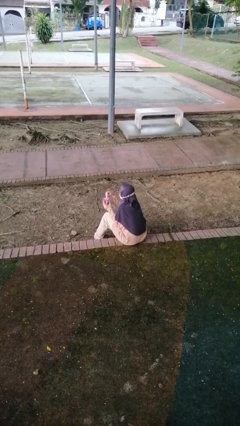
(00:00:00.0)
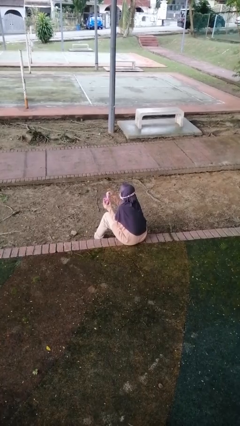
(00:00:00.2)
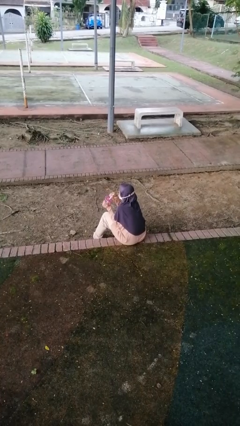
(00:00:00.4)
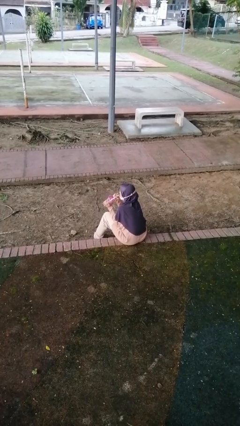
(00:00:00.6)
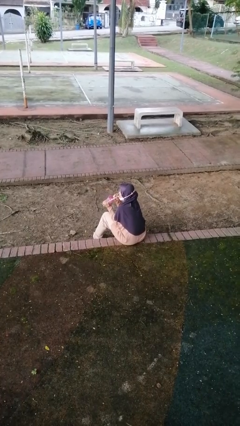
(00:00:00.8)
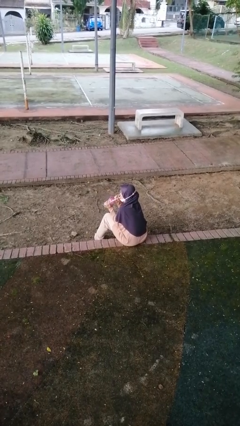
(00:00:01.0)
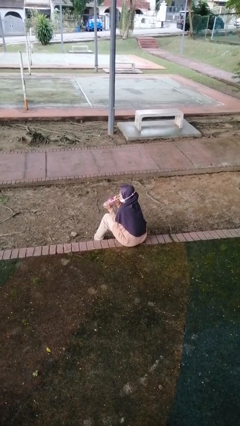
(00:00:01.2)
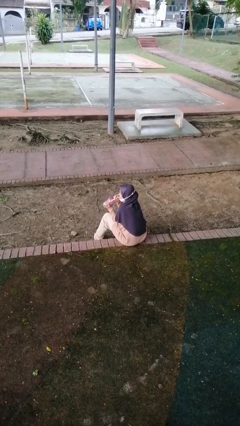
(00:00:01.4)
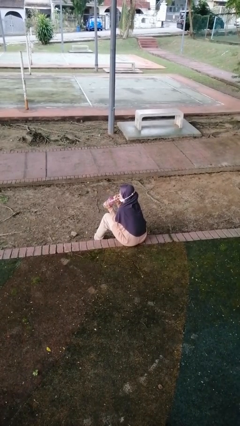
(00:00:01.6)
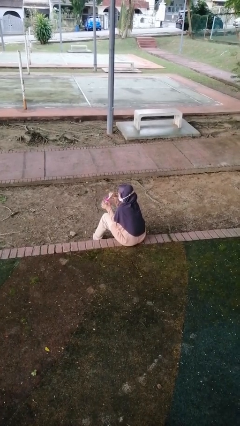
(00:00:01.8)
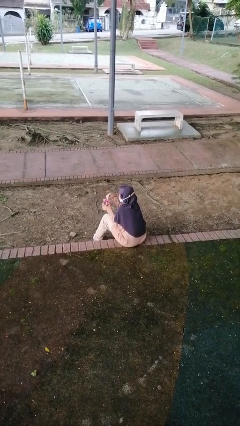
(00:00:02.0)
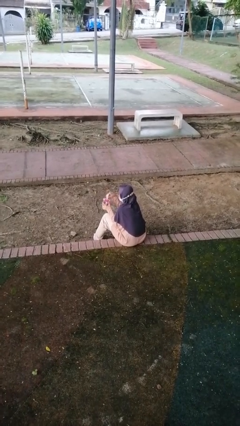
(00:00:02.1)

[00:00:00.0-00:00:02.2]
person drinks from straw

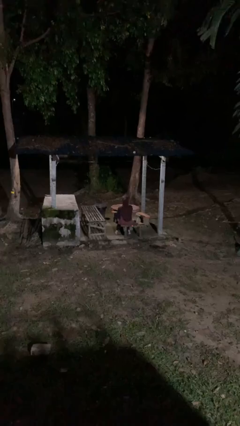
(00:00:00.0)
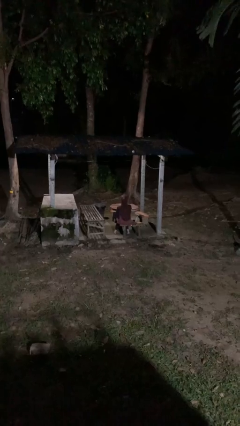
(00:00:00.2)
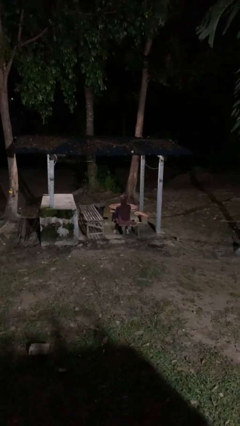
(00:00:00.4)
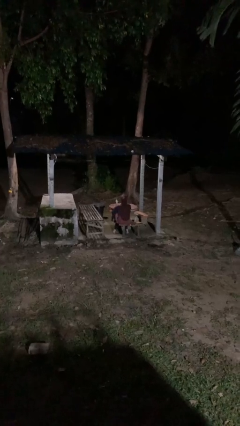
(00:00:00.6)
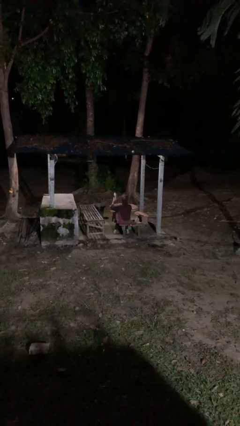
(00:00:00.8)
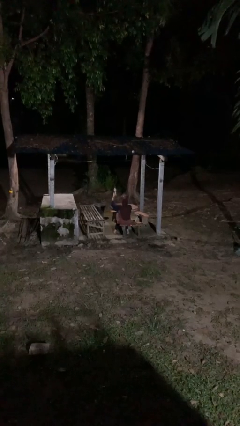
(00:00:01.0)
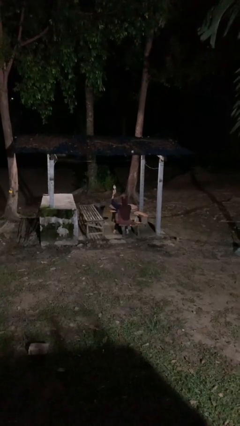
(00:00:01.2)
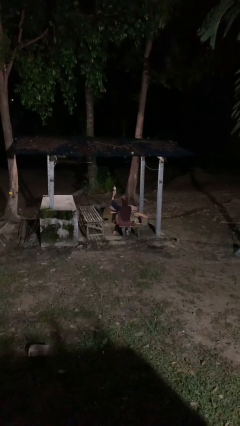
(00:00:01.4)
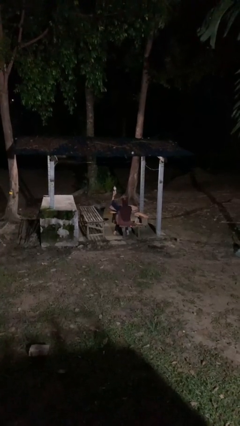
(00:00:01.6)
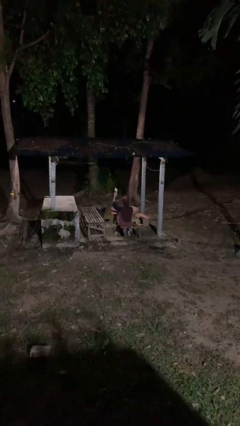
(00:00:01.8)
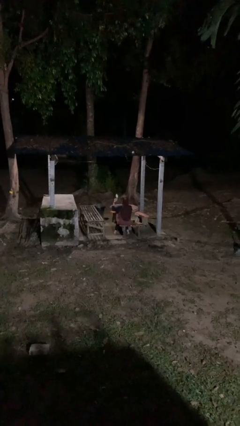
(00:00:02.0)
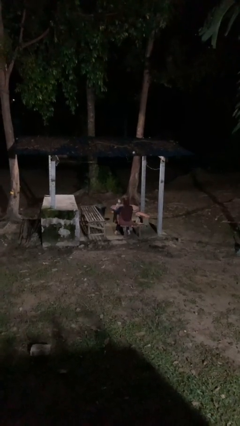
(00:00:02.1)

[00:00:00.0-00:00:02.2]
person holds object above head

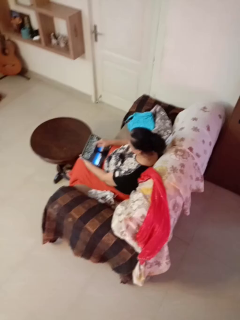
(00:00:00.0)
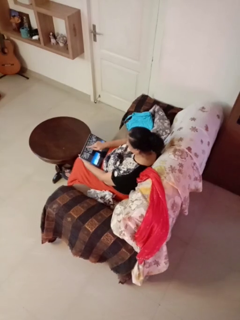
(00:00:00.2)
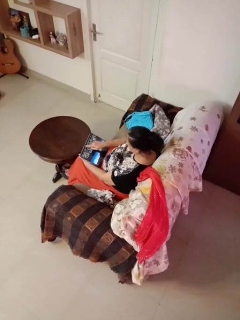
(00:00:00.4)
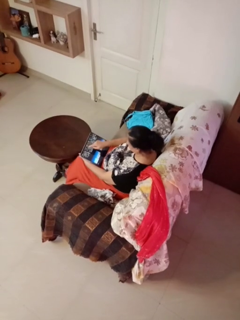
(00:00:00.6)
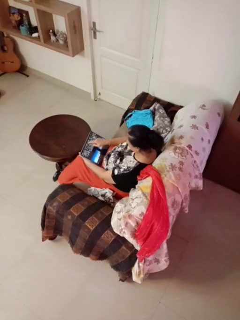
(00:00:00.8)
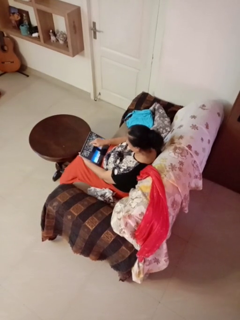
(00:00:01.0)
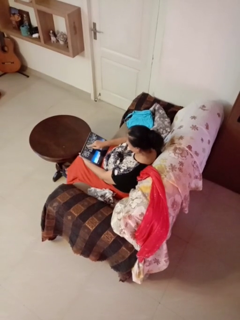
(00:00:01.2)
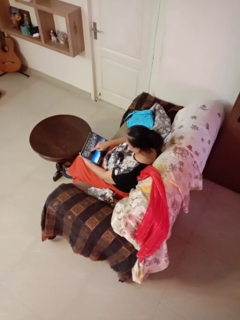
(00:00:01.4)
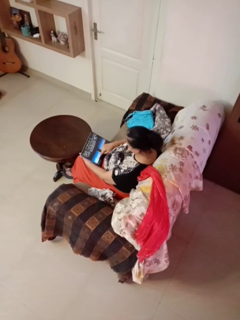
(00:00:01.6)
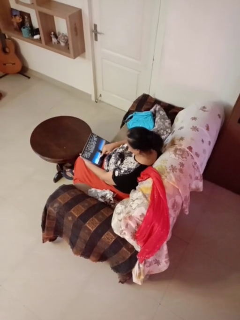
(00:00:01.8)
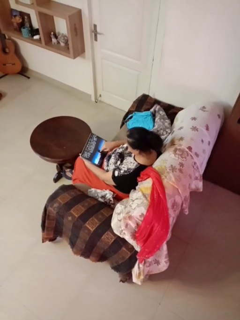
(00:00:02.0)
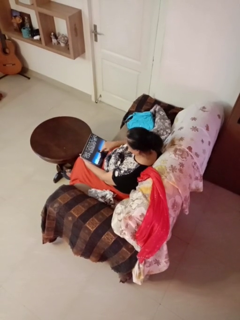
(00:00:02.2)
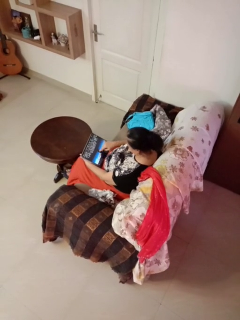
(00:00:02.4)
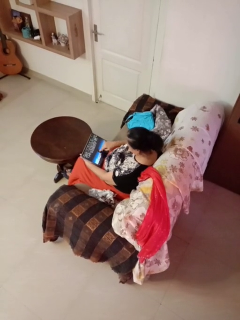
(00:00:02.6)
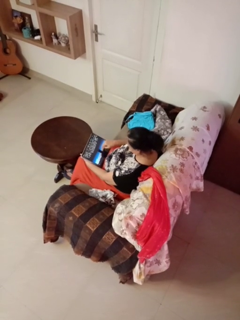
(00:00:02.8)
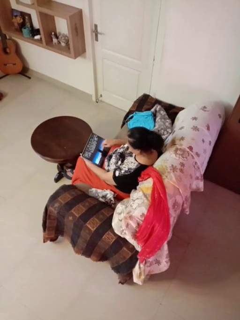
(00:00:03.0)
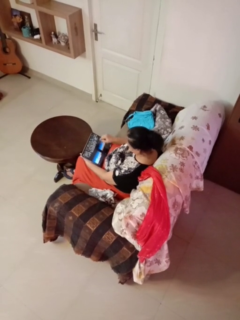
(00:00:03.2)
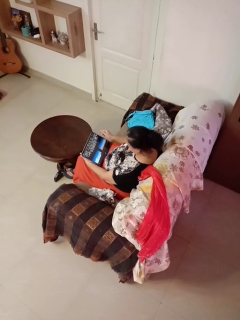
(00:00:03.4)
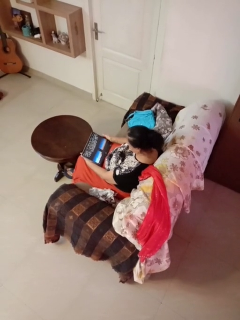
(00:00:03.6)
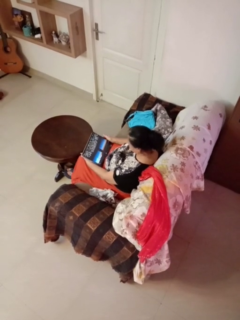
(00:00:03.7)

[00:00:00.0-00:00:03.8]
person interacts with tablet

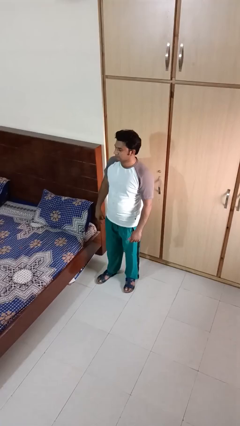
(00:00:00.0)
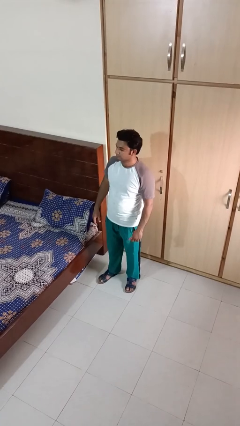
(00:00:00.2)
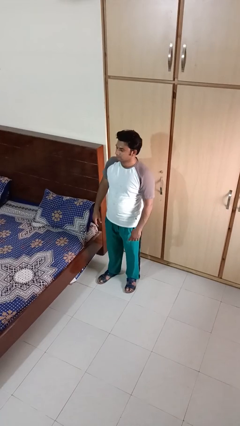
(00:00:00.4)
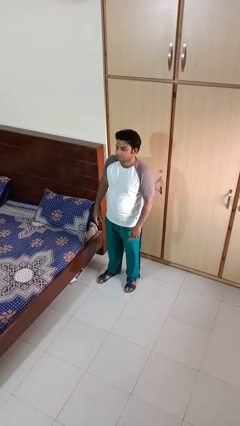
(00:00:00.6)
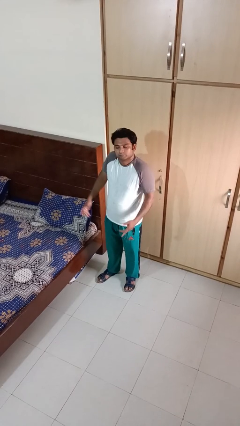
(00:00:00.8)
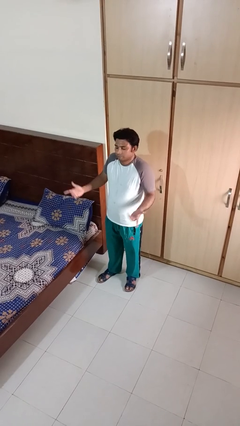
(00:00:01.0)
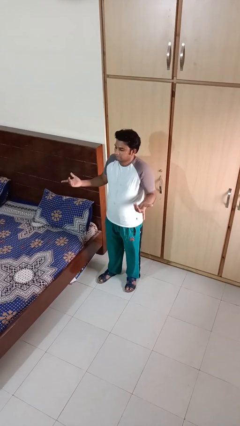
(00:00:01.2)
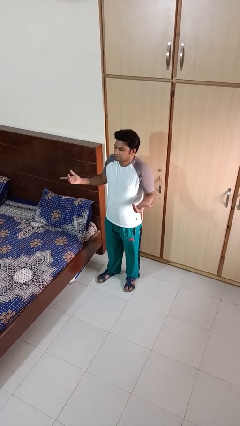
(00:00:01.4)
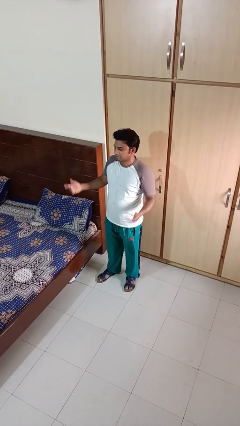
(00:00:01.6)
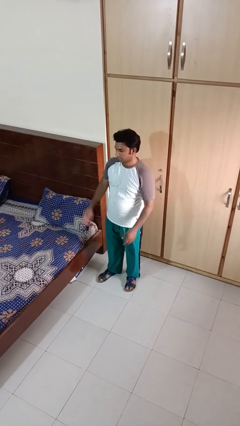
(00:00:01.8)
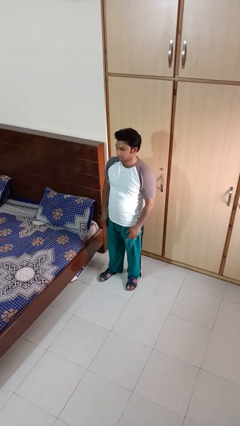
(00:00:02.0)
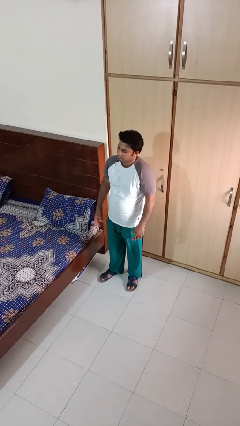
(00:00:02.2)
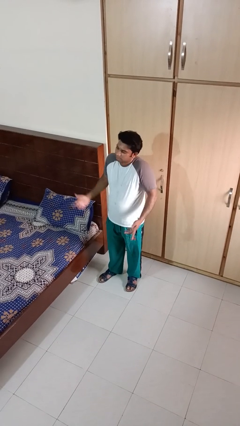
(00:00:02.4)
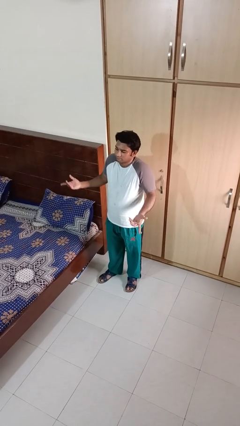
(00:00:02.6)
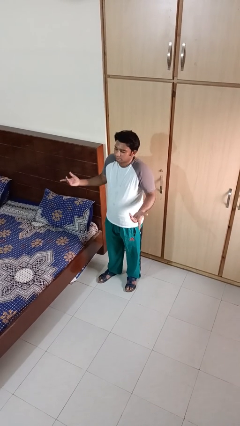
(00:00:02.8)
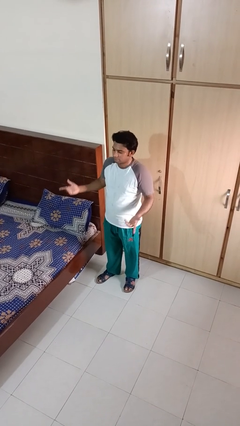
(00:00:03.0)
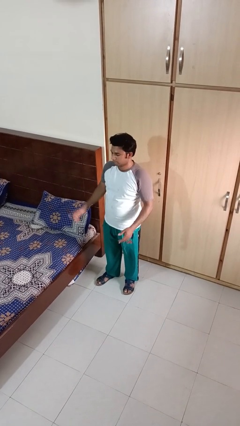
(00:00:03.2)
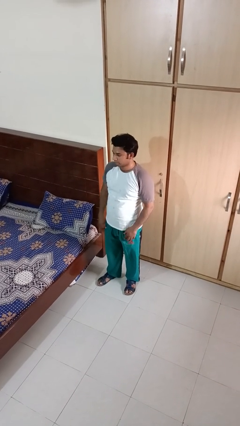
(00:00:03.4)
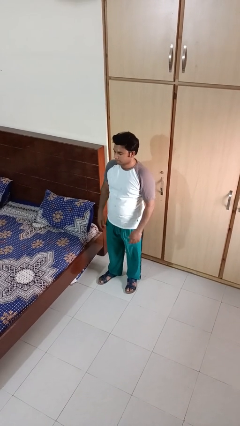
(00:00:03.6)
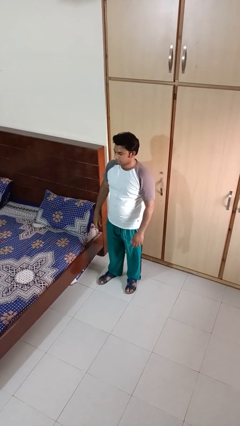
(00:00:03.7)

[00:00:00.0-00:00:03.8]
person shrugs

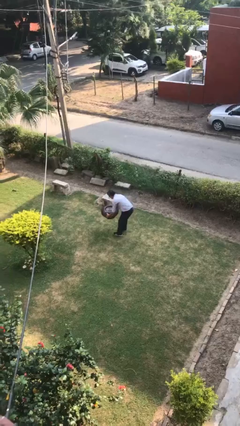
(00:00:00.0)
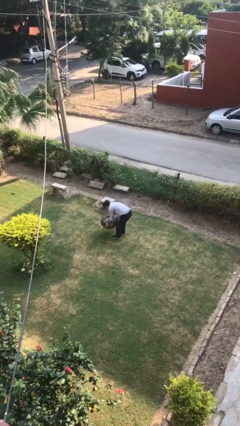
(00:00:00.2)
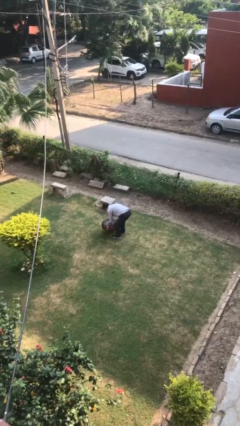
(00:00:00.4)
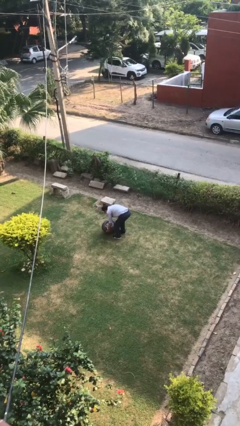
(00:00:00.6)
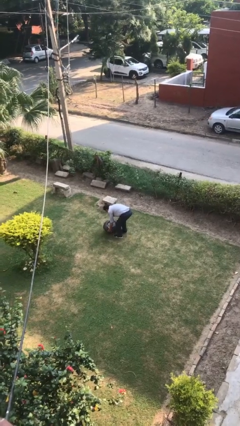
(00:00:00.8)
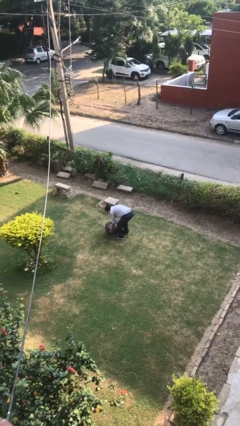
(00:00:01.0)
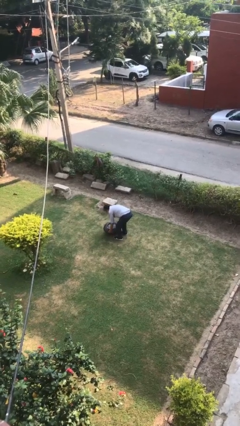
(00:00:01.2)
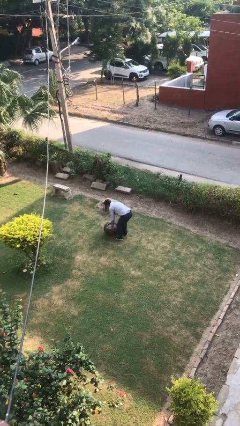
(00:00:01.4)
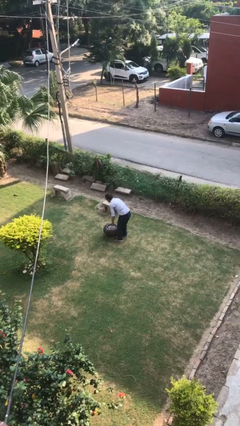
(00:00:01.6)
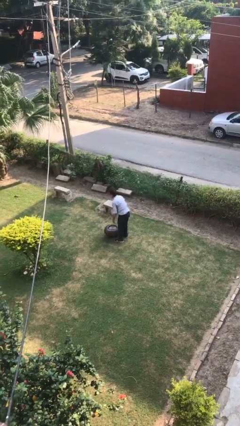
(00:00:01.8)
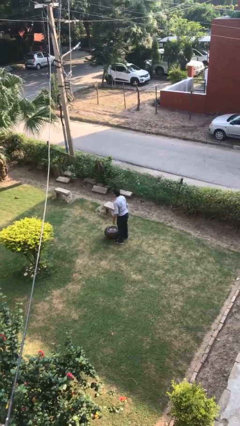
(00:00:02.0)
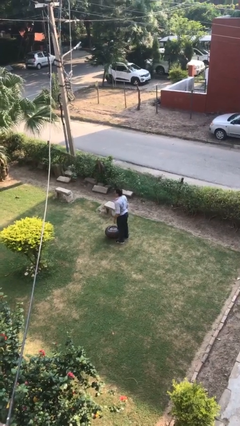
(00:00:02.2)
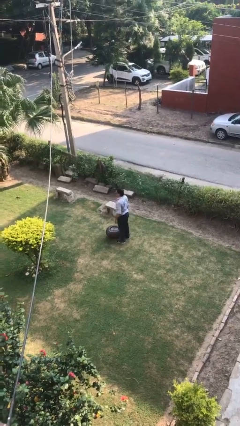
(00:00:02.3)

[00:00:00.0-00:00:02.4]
person puts down object on floor

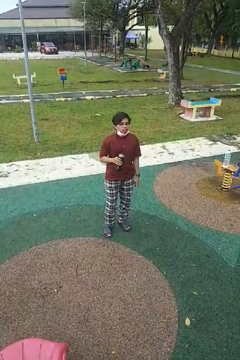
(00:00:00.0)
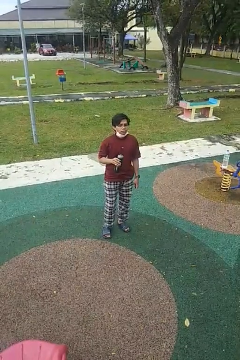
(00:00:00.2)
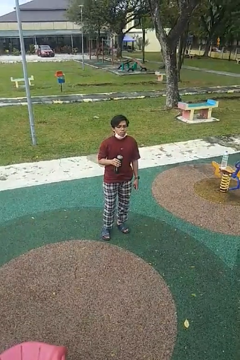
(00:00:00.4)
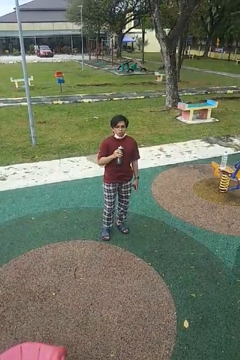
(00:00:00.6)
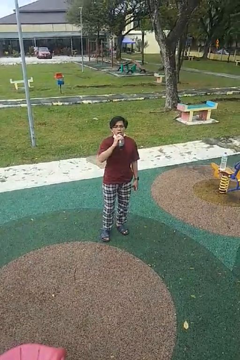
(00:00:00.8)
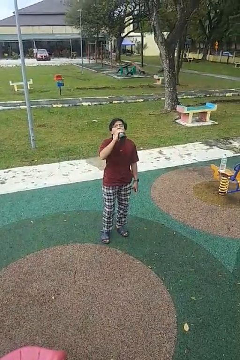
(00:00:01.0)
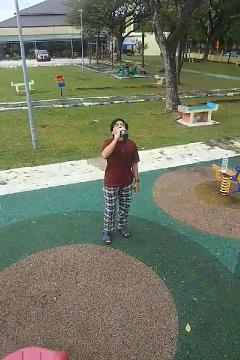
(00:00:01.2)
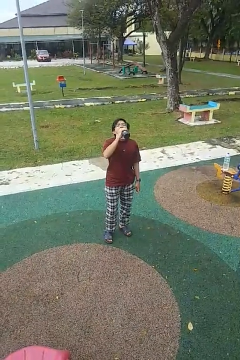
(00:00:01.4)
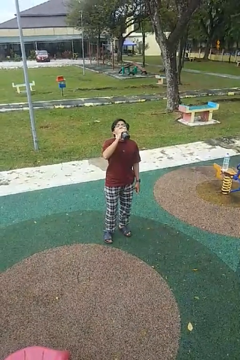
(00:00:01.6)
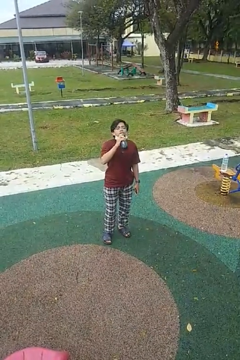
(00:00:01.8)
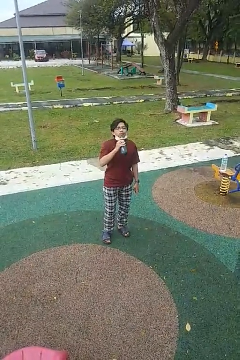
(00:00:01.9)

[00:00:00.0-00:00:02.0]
person drinks from bottle

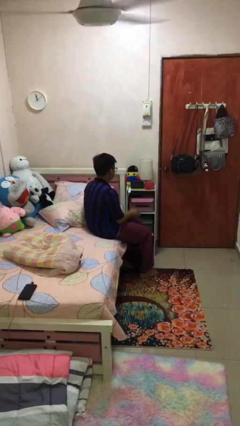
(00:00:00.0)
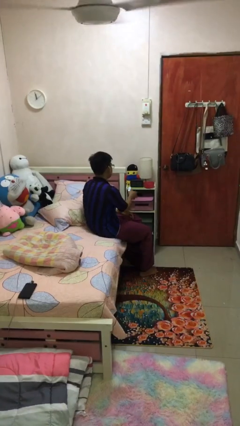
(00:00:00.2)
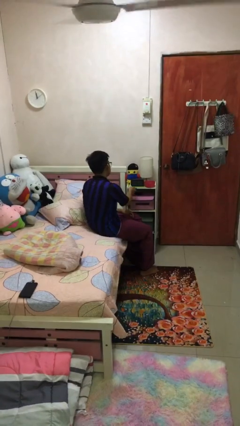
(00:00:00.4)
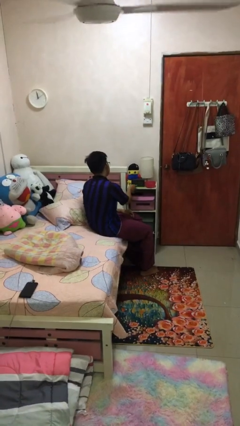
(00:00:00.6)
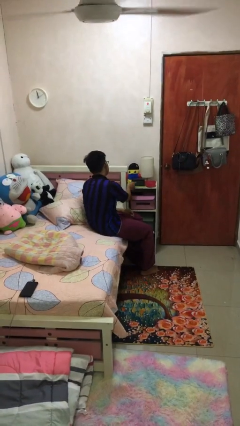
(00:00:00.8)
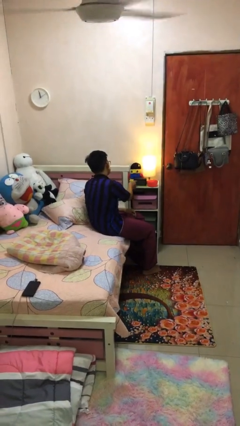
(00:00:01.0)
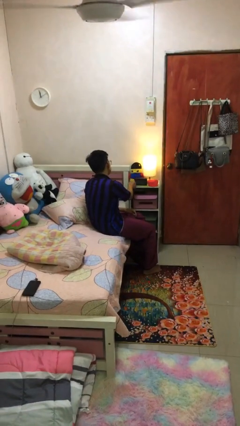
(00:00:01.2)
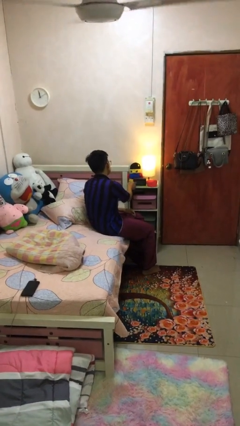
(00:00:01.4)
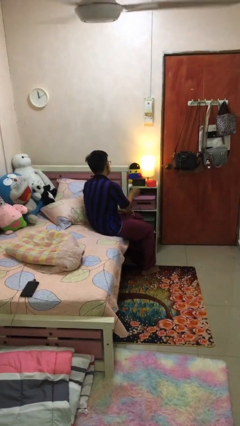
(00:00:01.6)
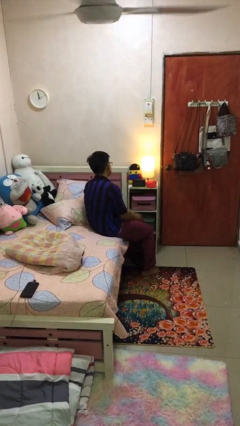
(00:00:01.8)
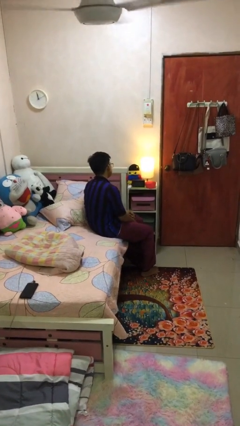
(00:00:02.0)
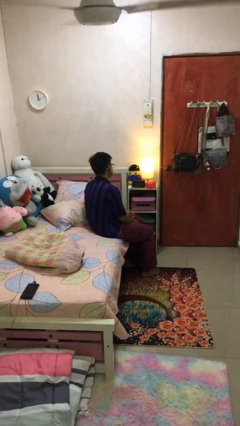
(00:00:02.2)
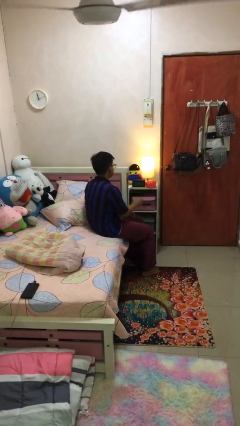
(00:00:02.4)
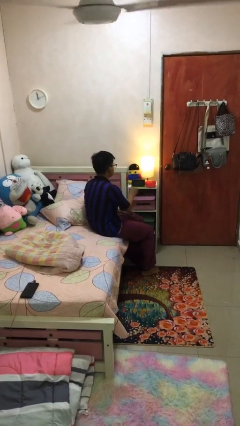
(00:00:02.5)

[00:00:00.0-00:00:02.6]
person turns on lamp
